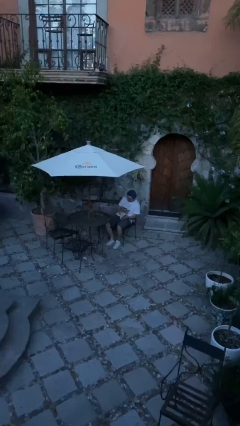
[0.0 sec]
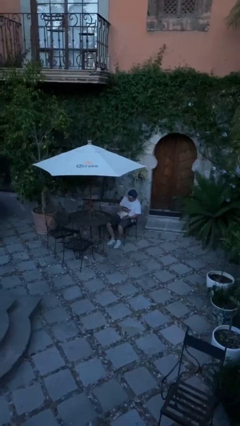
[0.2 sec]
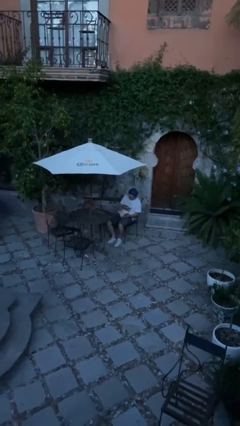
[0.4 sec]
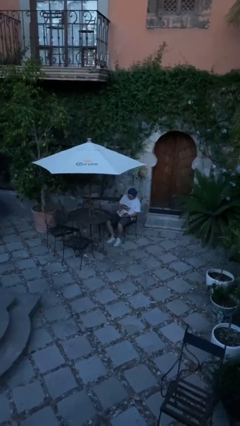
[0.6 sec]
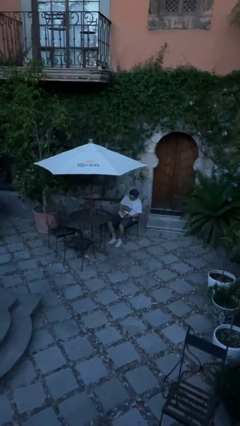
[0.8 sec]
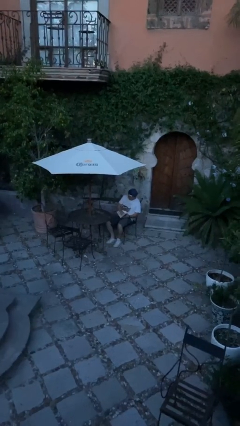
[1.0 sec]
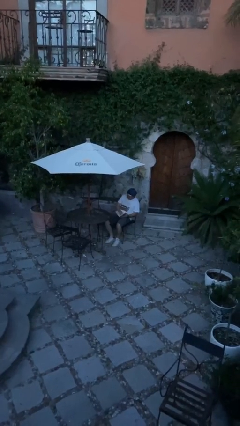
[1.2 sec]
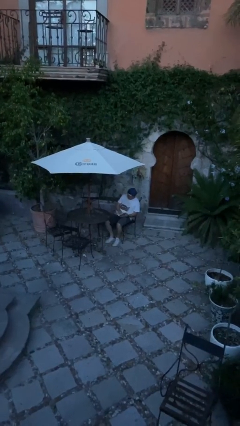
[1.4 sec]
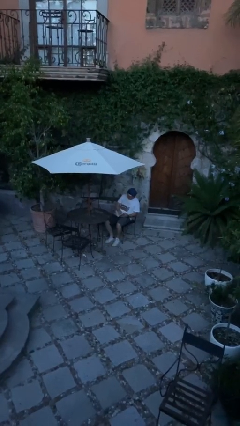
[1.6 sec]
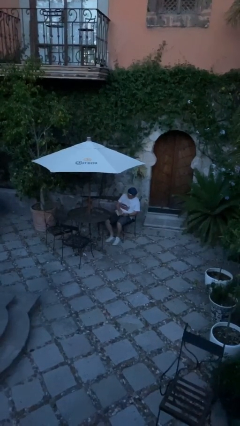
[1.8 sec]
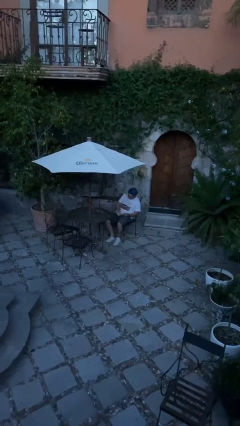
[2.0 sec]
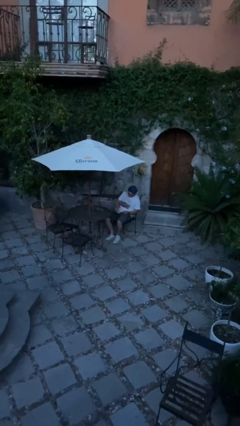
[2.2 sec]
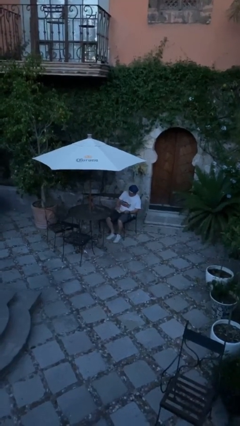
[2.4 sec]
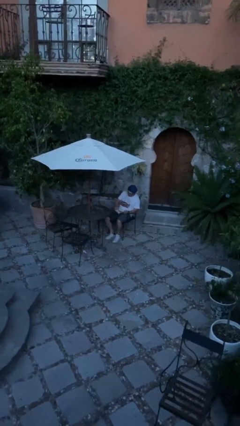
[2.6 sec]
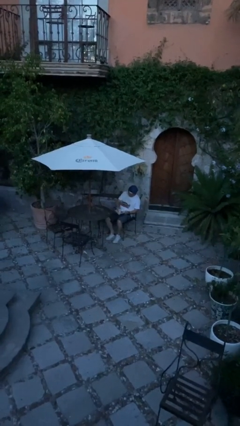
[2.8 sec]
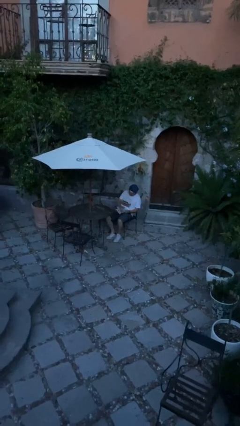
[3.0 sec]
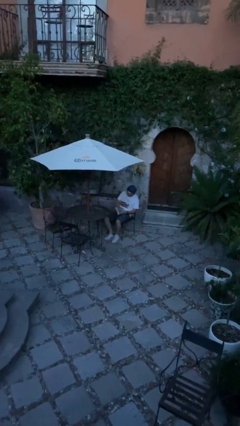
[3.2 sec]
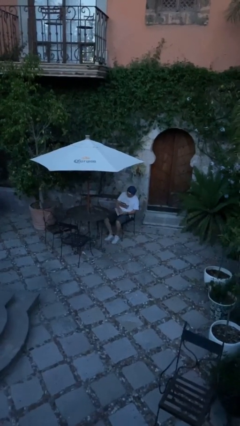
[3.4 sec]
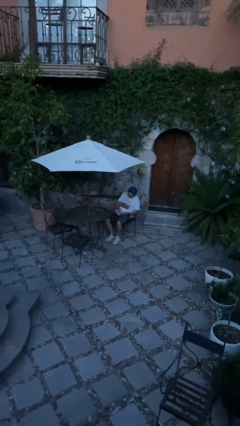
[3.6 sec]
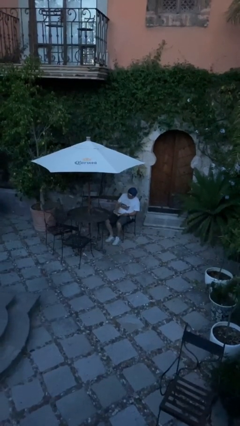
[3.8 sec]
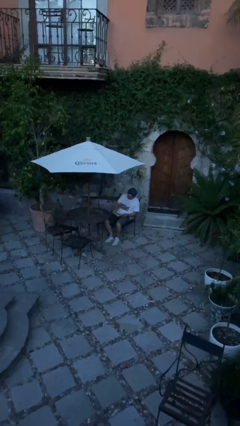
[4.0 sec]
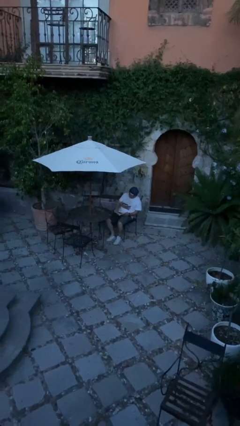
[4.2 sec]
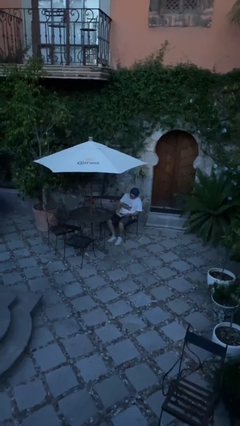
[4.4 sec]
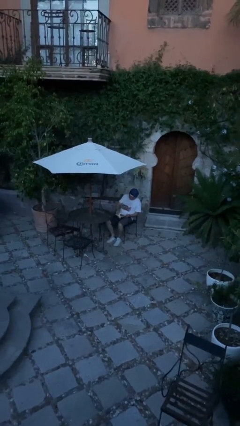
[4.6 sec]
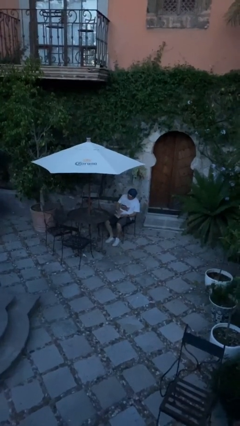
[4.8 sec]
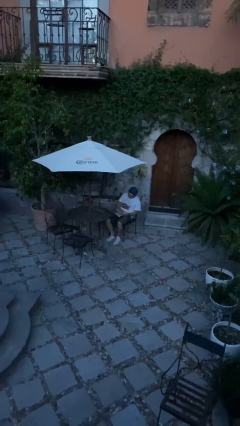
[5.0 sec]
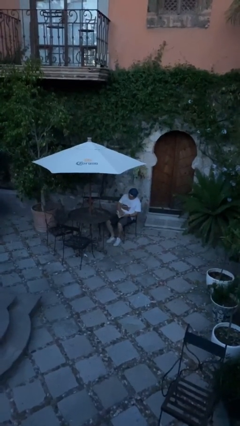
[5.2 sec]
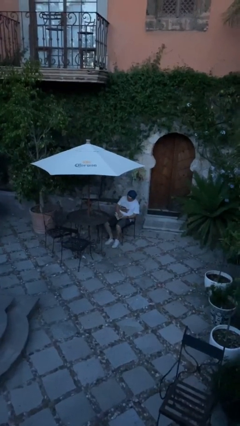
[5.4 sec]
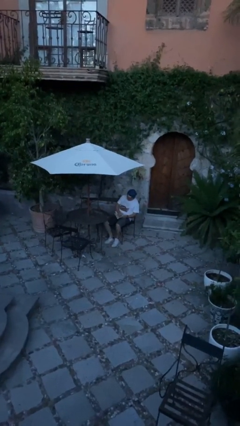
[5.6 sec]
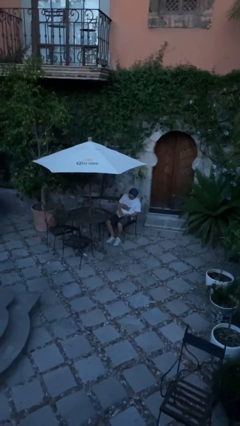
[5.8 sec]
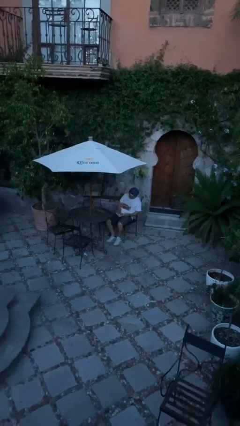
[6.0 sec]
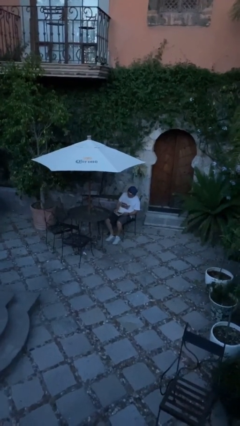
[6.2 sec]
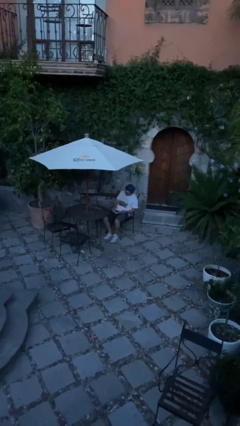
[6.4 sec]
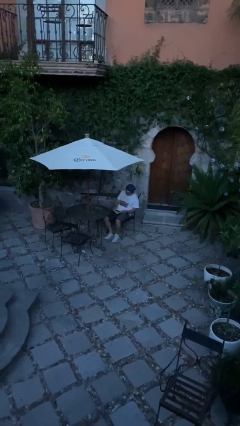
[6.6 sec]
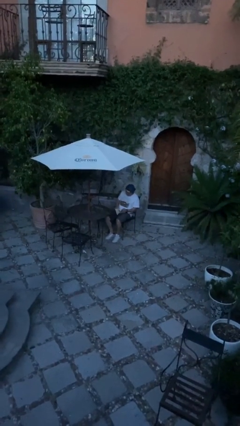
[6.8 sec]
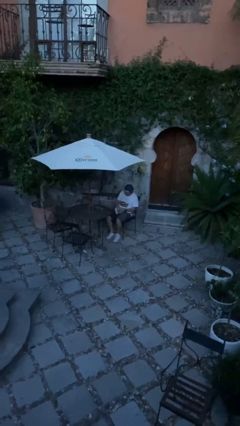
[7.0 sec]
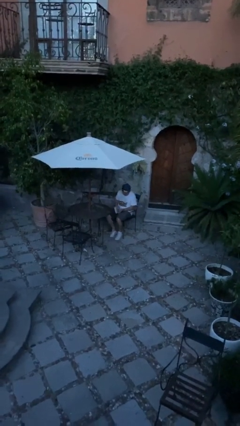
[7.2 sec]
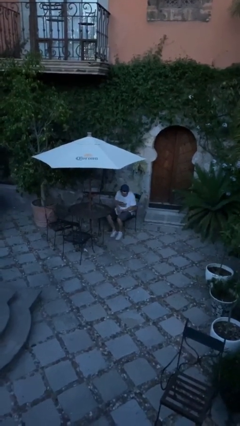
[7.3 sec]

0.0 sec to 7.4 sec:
person reads document

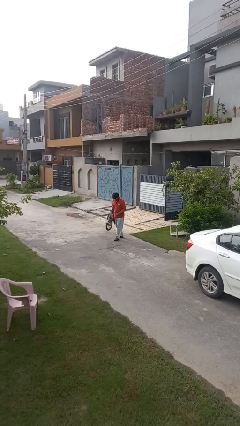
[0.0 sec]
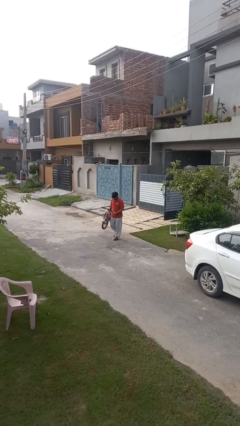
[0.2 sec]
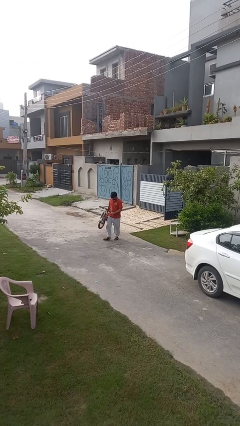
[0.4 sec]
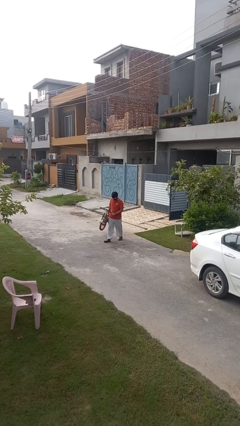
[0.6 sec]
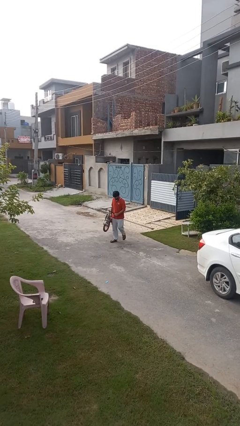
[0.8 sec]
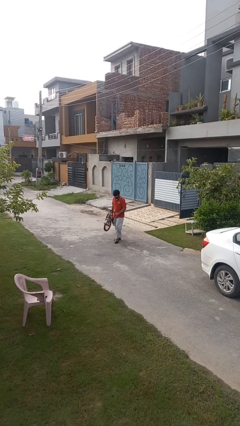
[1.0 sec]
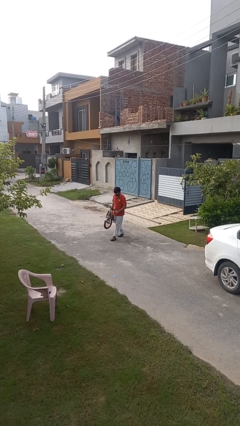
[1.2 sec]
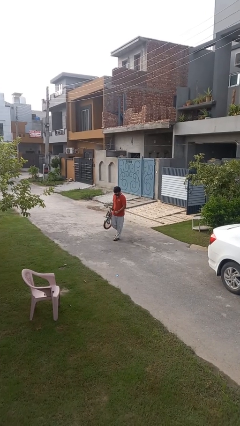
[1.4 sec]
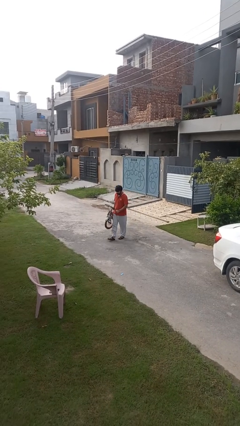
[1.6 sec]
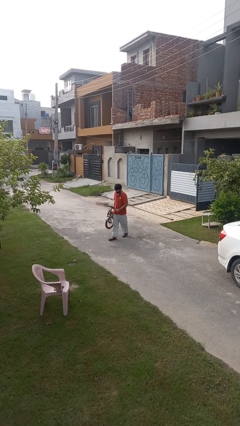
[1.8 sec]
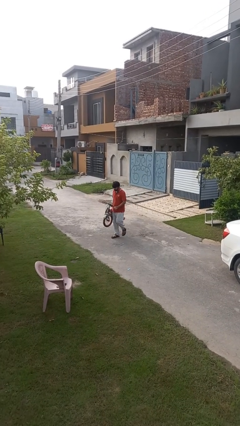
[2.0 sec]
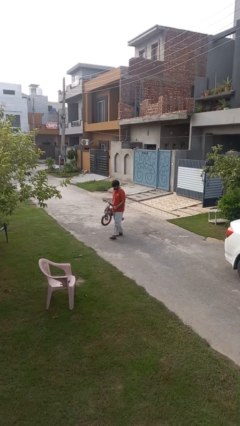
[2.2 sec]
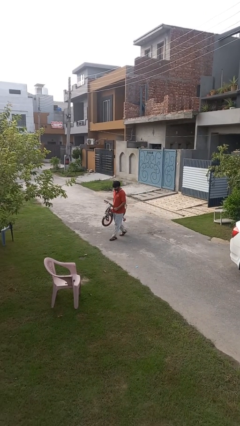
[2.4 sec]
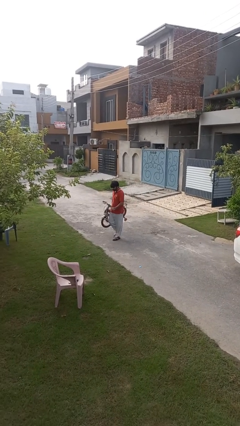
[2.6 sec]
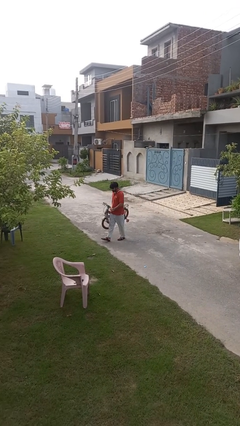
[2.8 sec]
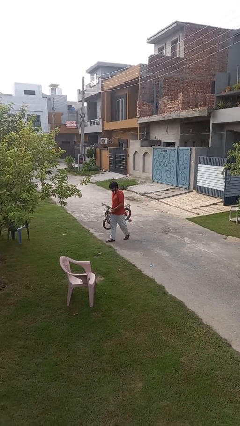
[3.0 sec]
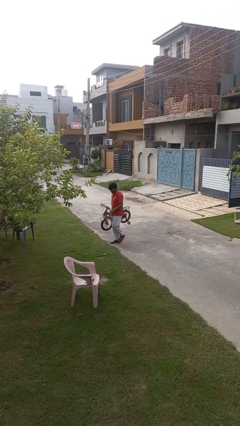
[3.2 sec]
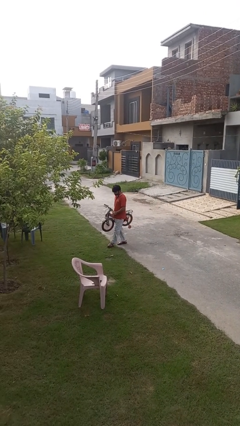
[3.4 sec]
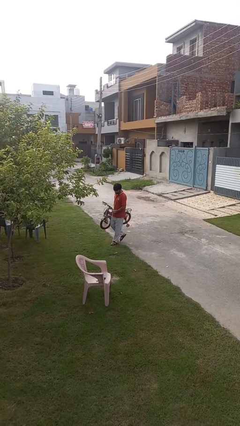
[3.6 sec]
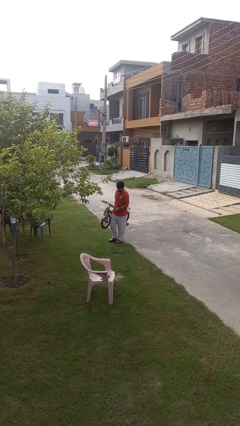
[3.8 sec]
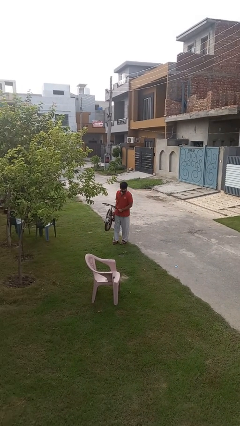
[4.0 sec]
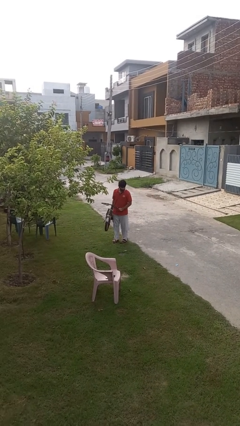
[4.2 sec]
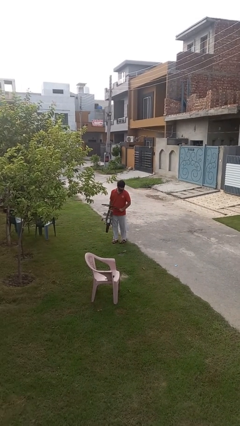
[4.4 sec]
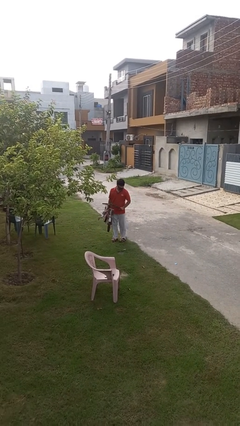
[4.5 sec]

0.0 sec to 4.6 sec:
person carries bicycle

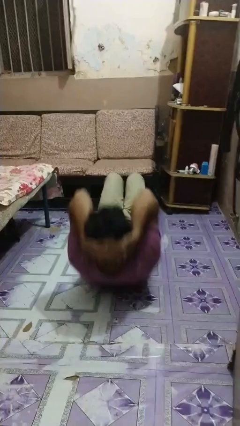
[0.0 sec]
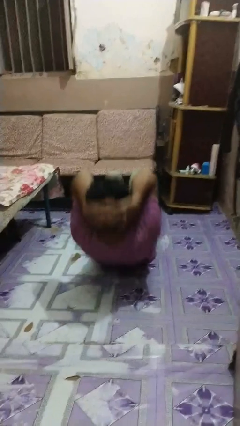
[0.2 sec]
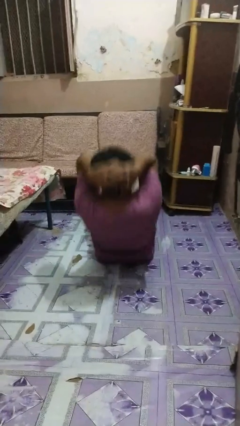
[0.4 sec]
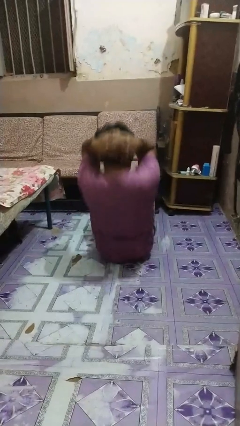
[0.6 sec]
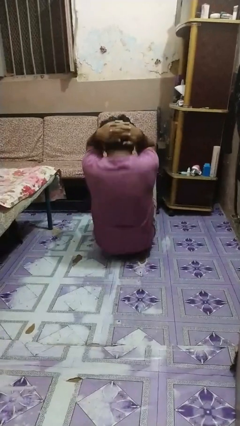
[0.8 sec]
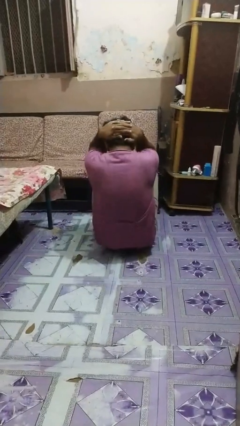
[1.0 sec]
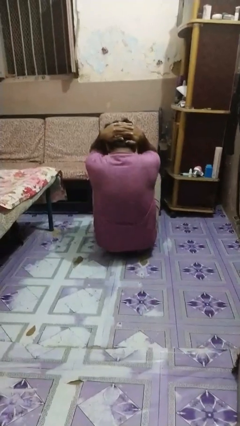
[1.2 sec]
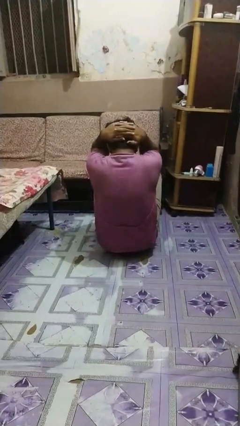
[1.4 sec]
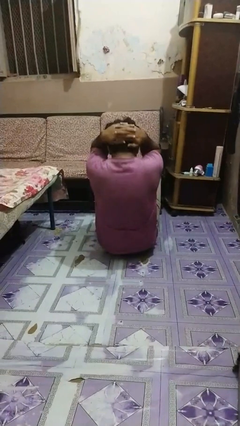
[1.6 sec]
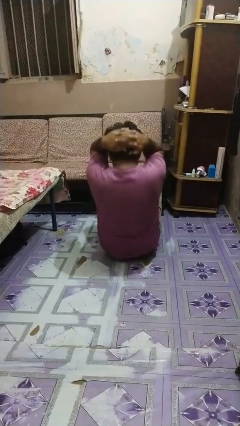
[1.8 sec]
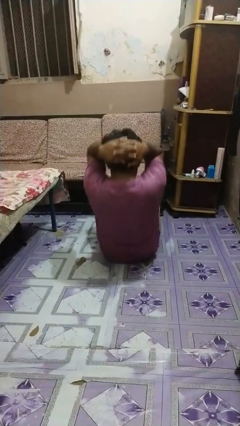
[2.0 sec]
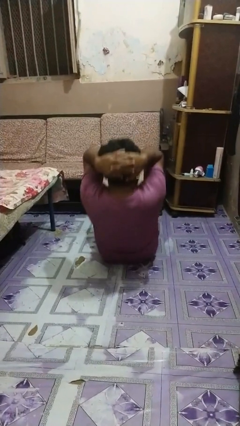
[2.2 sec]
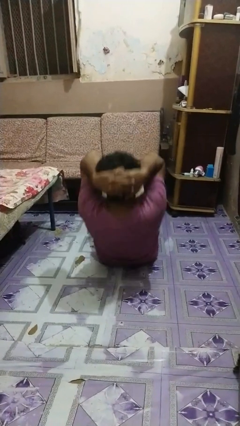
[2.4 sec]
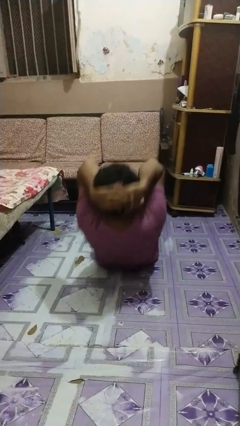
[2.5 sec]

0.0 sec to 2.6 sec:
person exercises with situp

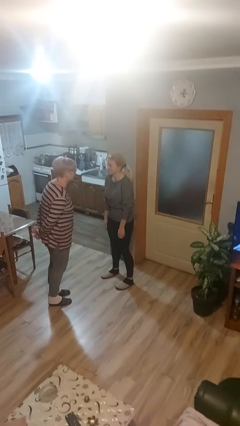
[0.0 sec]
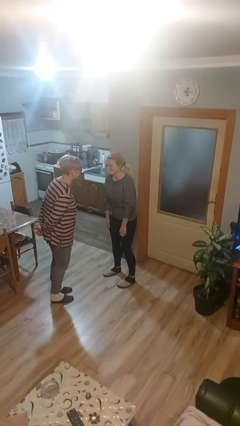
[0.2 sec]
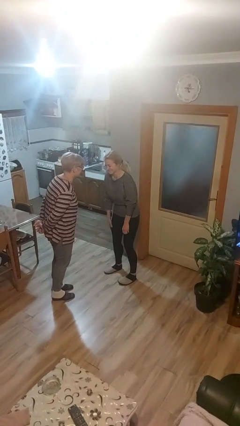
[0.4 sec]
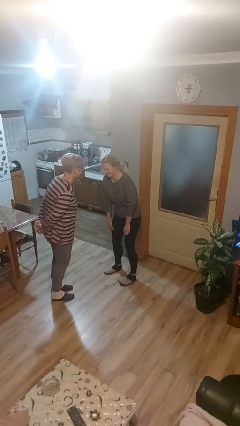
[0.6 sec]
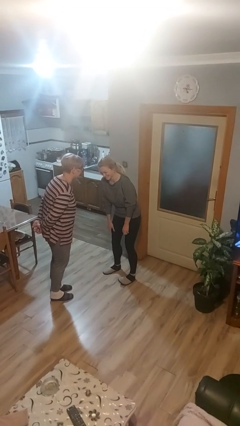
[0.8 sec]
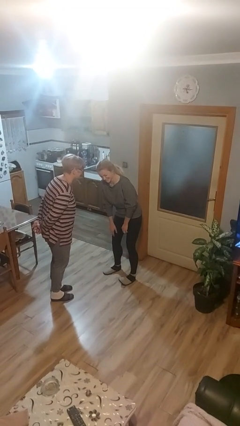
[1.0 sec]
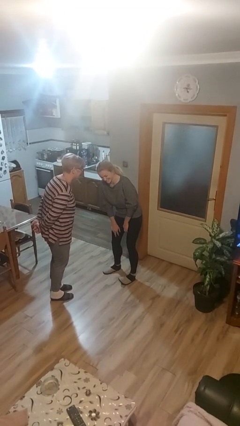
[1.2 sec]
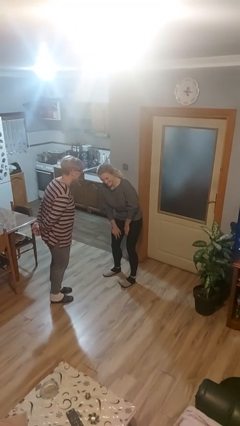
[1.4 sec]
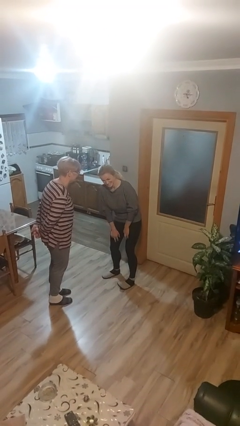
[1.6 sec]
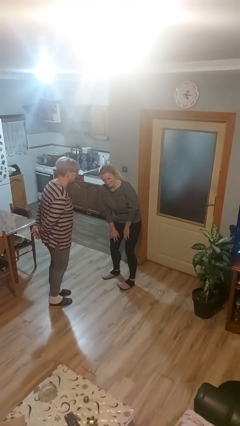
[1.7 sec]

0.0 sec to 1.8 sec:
person laughs with person

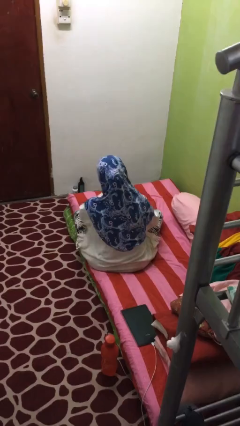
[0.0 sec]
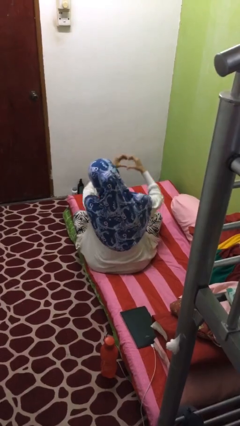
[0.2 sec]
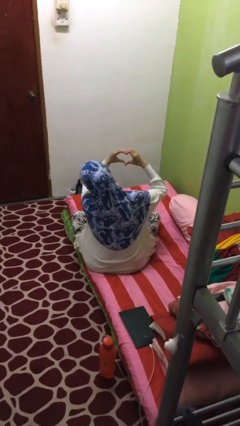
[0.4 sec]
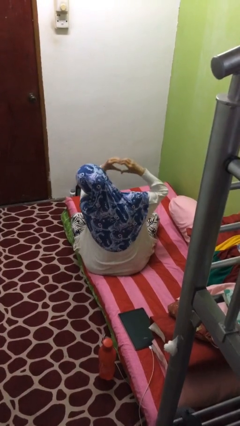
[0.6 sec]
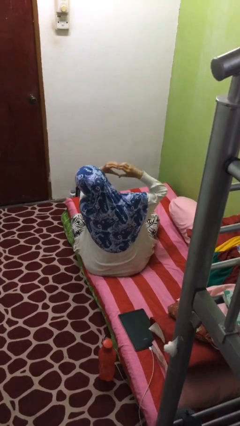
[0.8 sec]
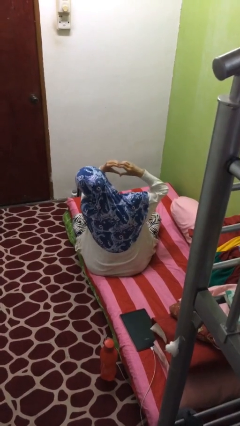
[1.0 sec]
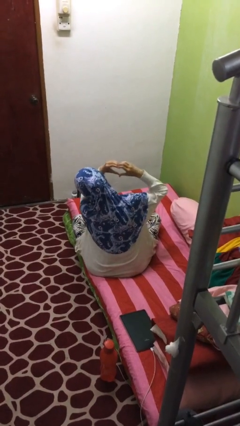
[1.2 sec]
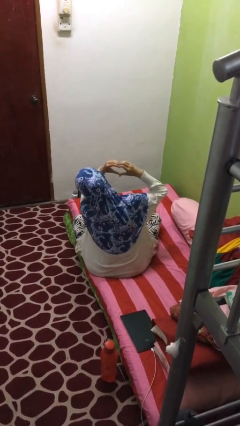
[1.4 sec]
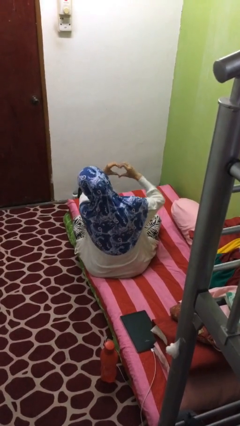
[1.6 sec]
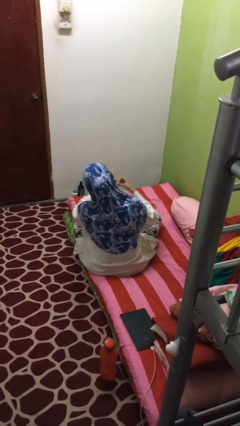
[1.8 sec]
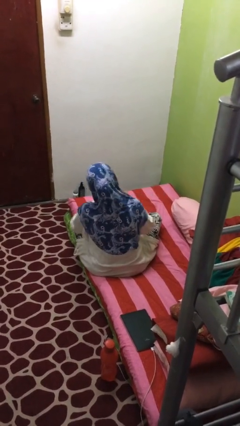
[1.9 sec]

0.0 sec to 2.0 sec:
person gestures heart
